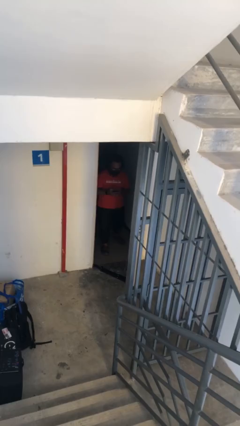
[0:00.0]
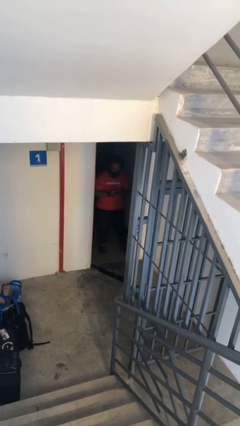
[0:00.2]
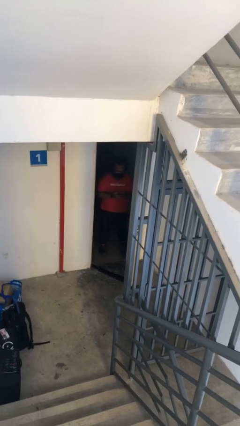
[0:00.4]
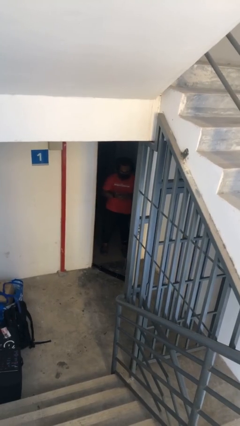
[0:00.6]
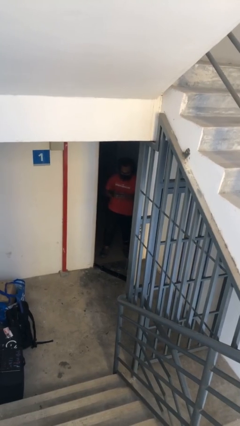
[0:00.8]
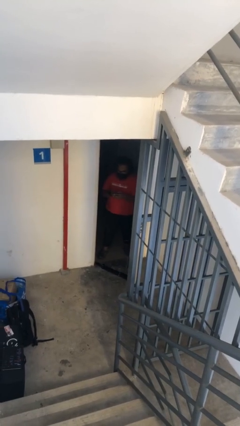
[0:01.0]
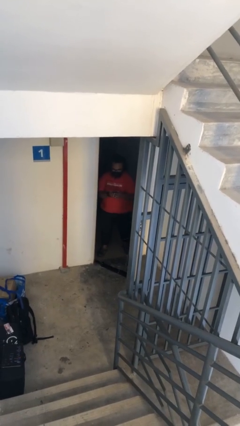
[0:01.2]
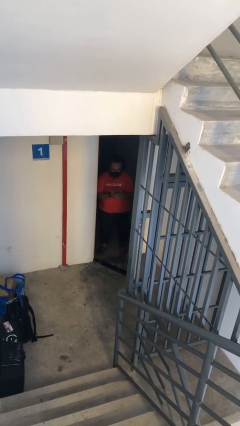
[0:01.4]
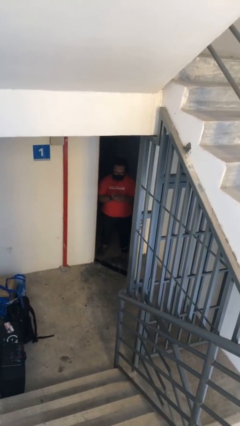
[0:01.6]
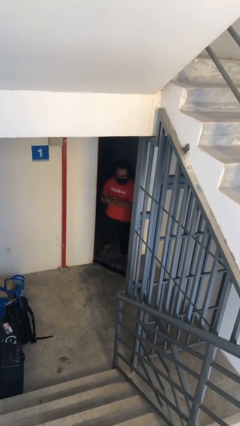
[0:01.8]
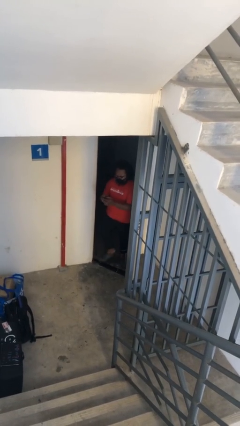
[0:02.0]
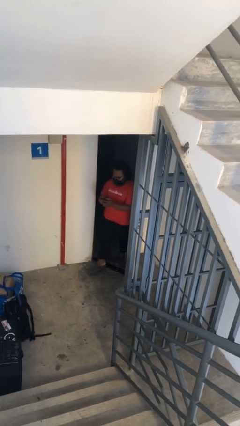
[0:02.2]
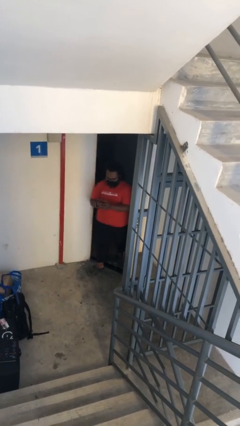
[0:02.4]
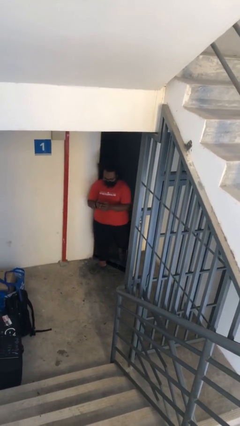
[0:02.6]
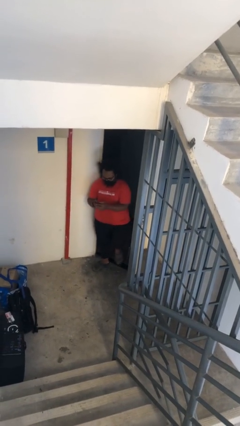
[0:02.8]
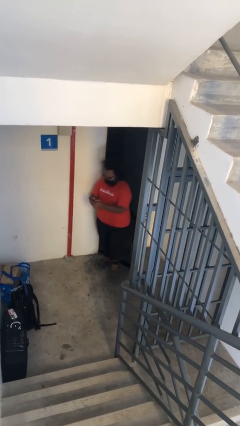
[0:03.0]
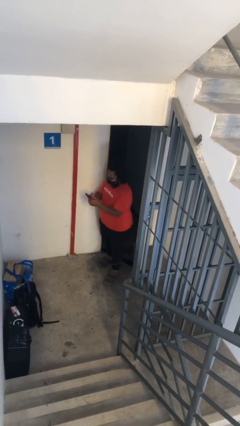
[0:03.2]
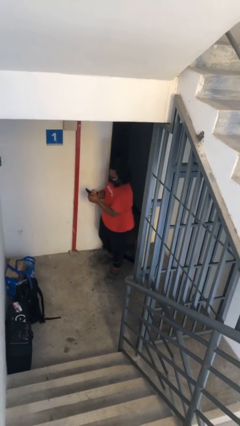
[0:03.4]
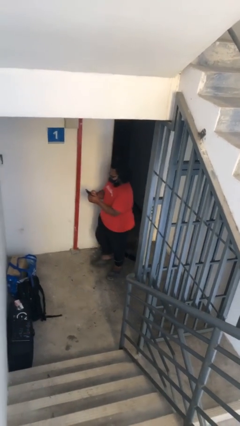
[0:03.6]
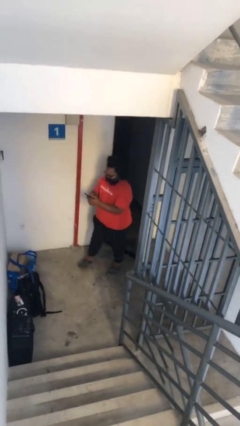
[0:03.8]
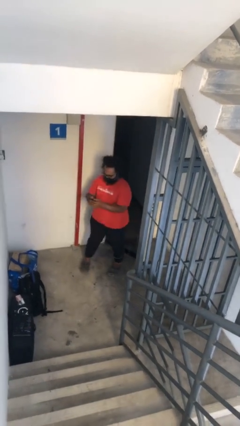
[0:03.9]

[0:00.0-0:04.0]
person enters scene through structure

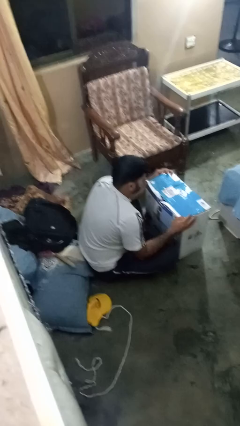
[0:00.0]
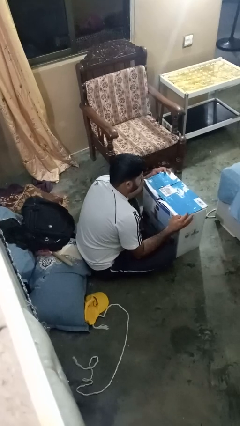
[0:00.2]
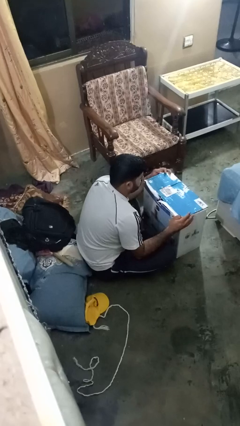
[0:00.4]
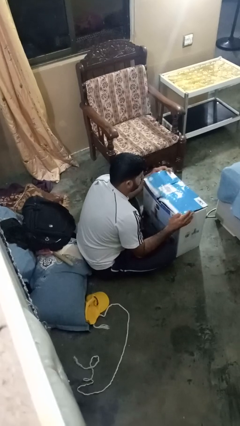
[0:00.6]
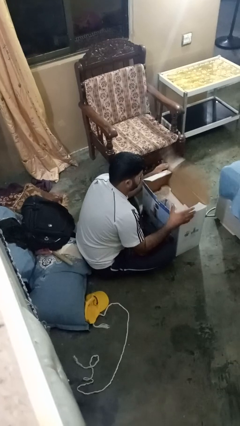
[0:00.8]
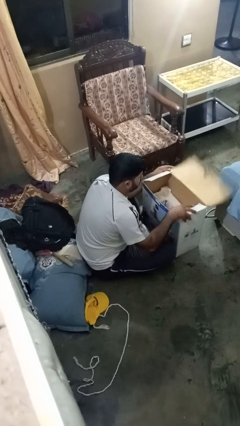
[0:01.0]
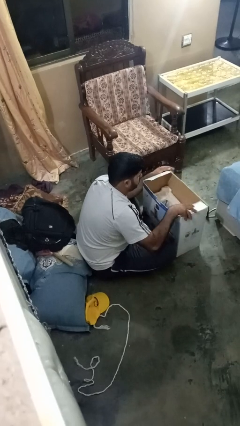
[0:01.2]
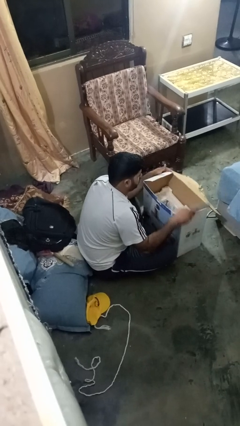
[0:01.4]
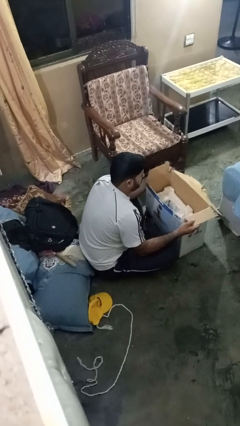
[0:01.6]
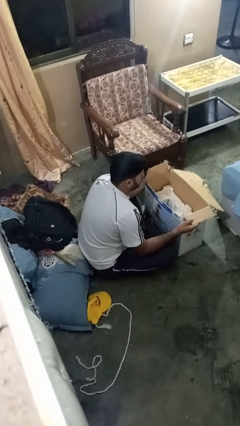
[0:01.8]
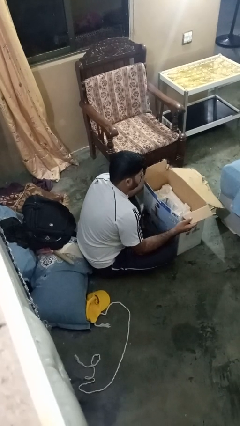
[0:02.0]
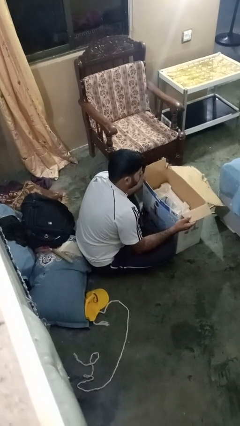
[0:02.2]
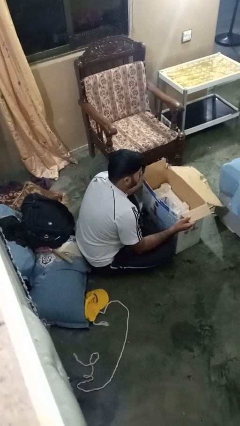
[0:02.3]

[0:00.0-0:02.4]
person opens box

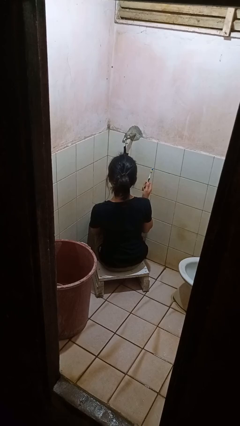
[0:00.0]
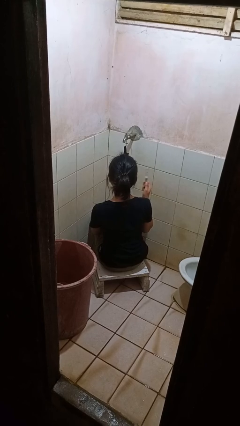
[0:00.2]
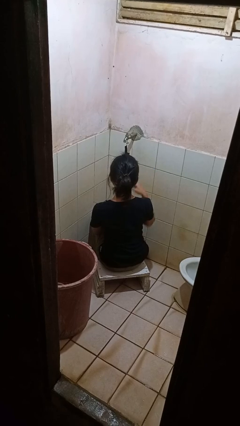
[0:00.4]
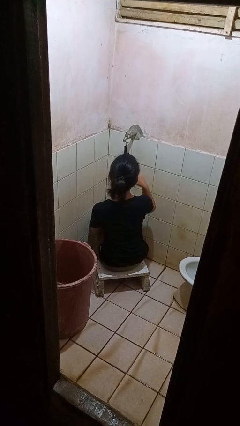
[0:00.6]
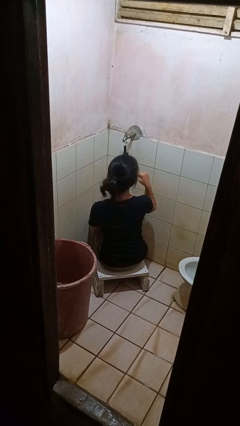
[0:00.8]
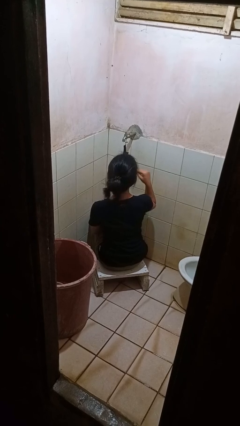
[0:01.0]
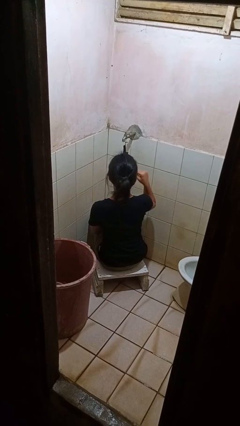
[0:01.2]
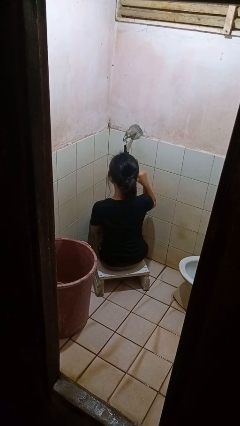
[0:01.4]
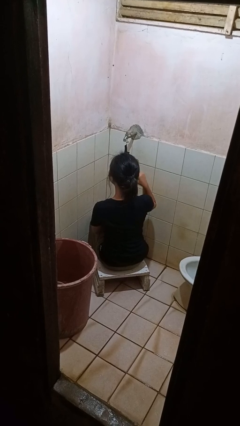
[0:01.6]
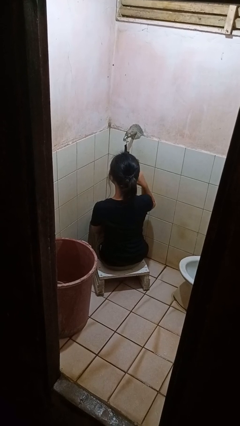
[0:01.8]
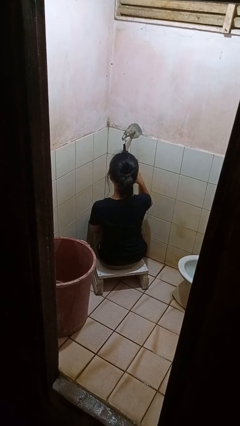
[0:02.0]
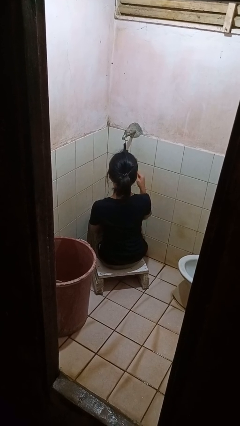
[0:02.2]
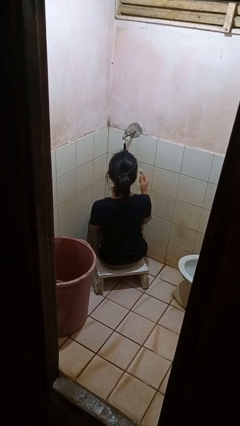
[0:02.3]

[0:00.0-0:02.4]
person brushes teeth

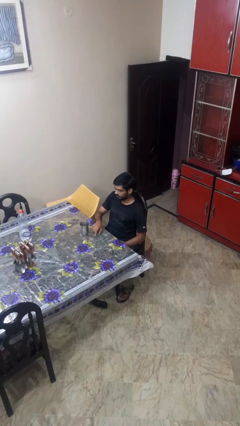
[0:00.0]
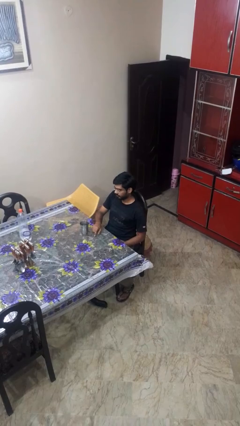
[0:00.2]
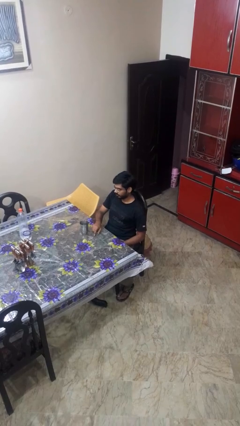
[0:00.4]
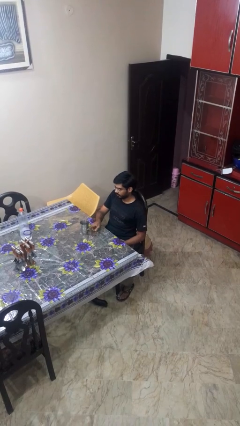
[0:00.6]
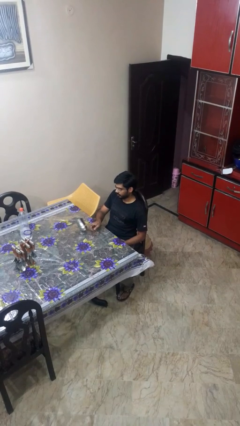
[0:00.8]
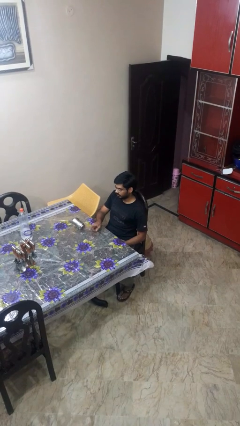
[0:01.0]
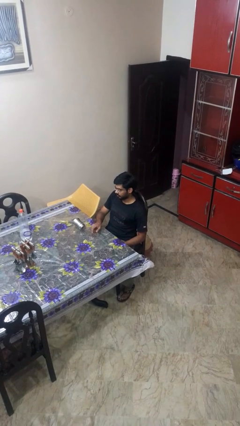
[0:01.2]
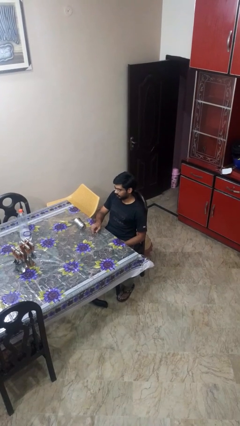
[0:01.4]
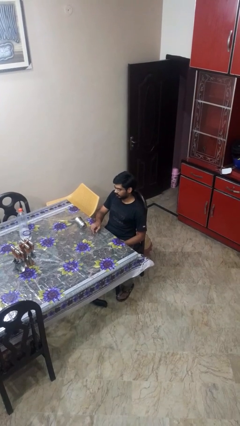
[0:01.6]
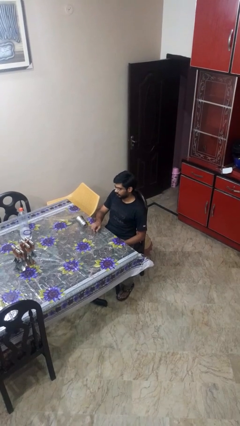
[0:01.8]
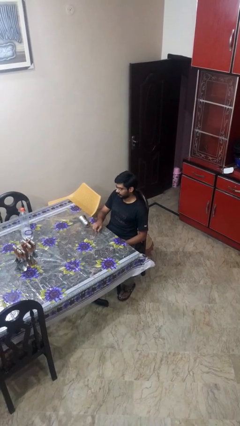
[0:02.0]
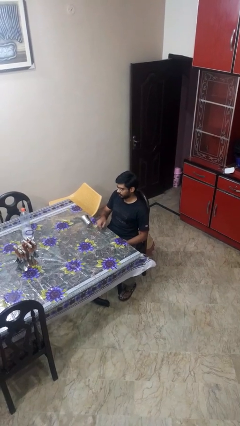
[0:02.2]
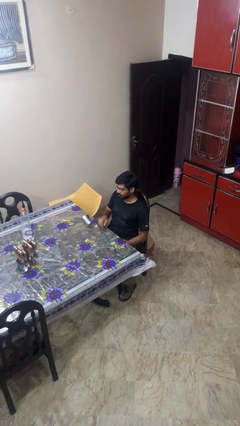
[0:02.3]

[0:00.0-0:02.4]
person knocks over glass

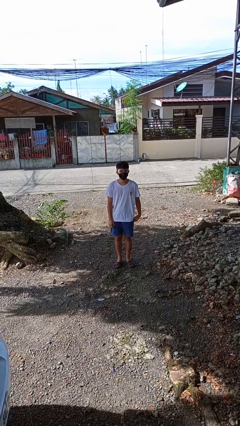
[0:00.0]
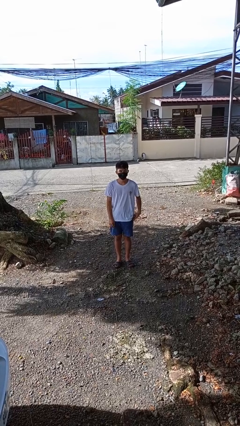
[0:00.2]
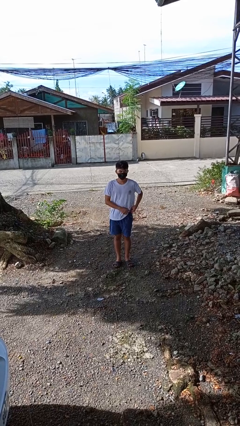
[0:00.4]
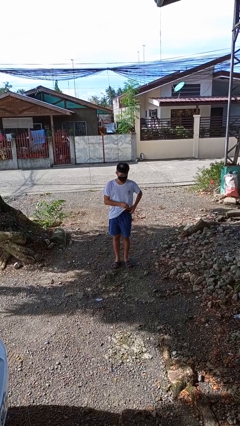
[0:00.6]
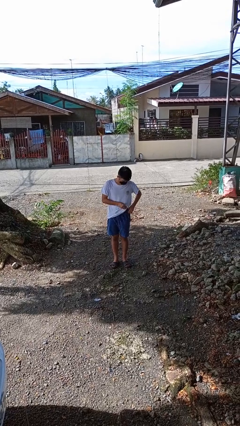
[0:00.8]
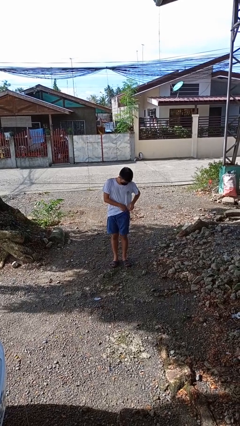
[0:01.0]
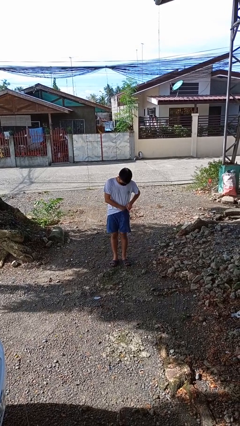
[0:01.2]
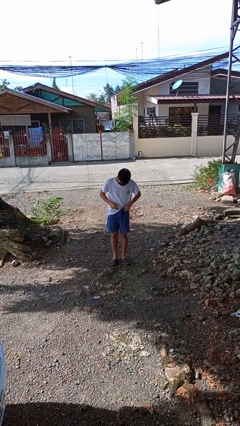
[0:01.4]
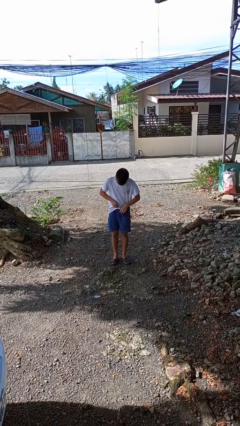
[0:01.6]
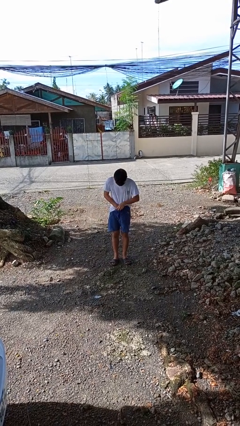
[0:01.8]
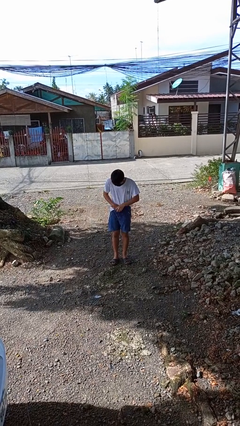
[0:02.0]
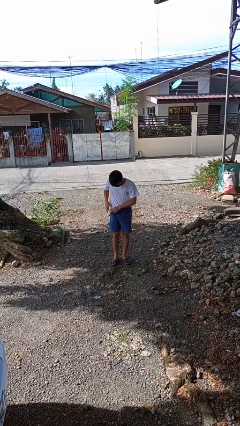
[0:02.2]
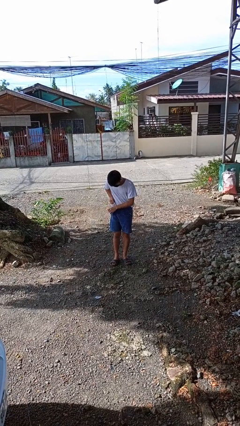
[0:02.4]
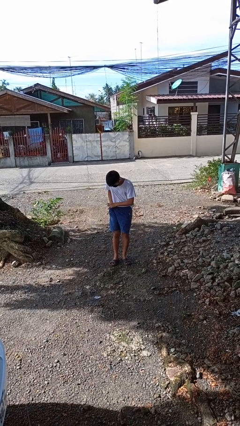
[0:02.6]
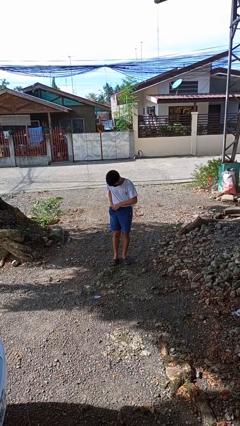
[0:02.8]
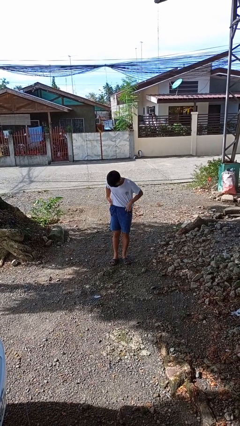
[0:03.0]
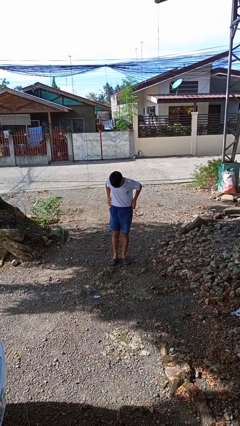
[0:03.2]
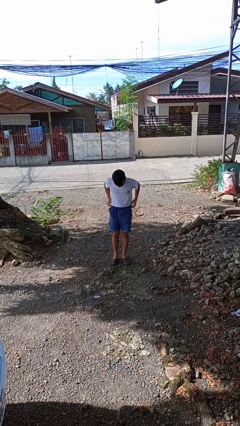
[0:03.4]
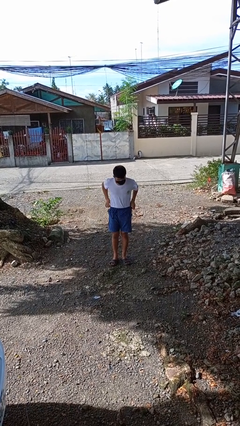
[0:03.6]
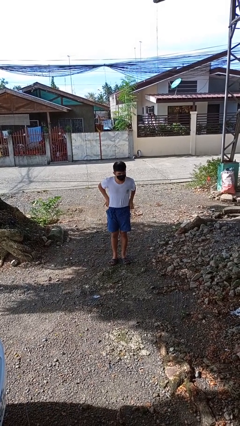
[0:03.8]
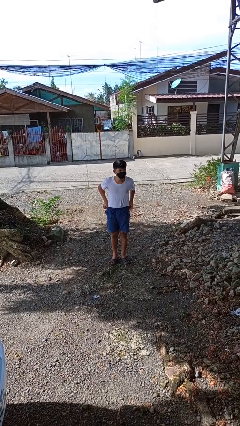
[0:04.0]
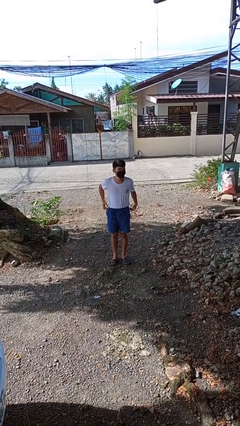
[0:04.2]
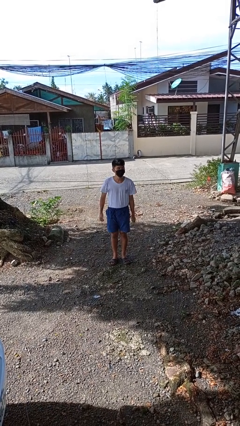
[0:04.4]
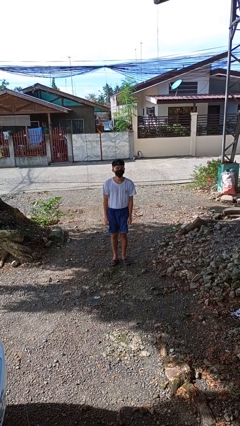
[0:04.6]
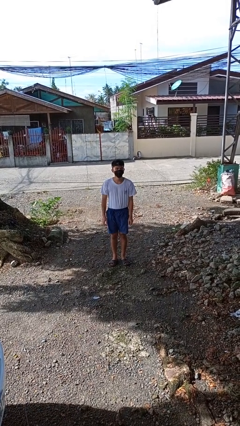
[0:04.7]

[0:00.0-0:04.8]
person tucks in shirt

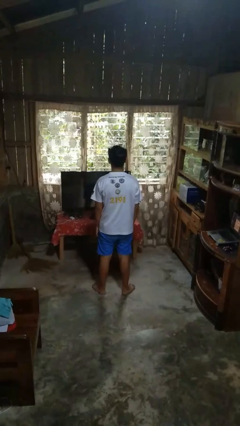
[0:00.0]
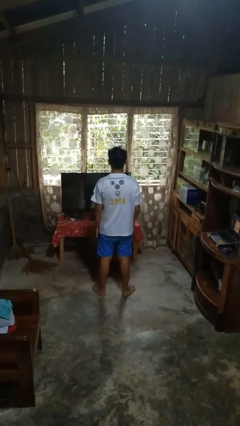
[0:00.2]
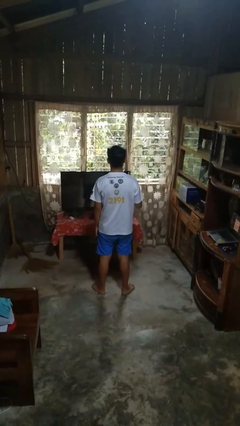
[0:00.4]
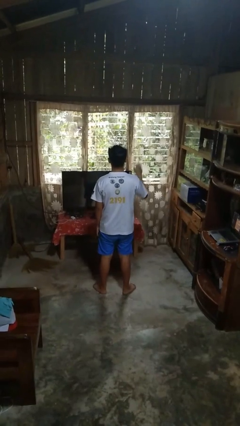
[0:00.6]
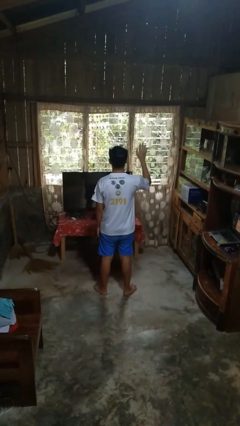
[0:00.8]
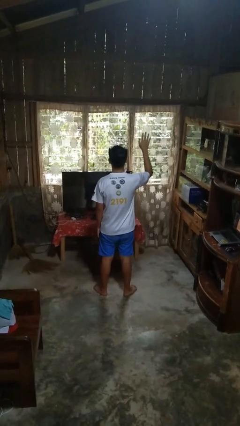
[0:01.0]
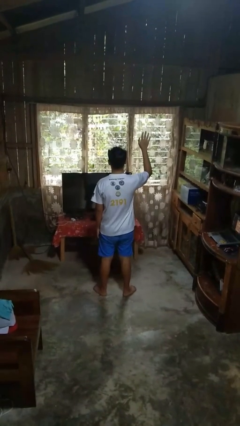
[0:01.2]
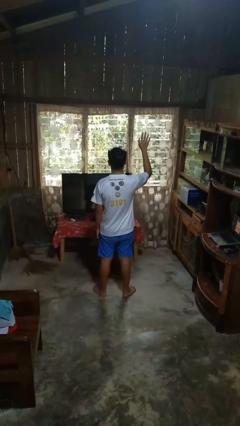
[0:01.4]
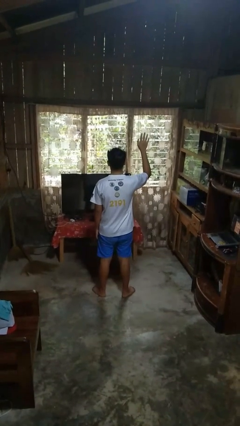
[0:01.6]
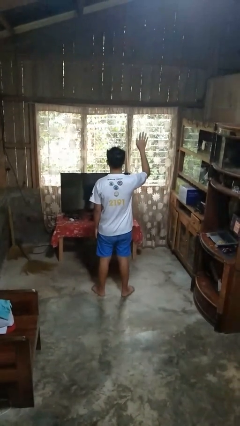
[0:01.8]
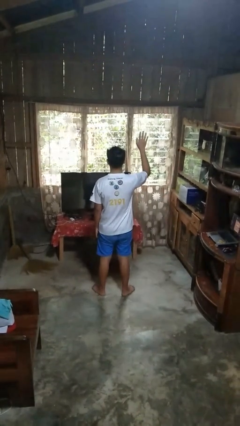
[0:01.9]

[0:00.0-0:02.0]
person gestures raise hand
